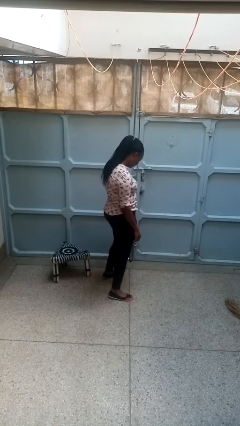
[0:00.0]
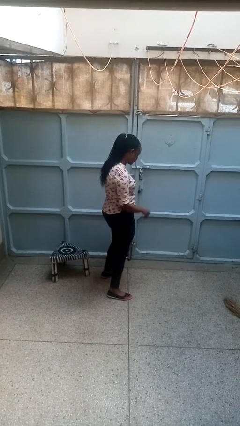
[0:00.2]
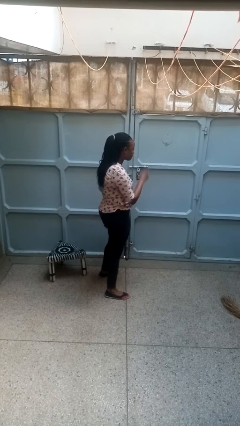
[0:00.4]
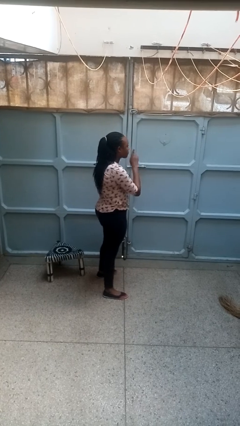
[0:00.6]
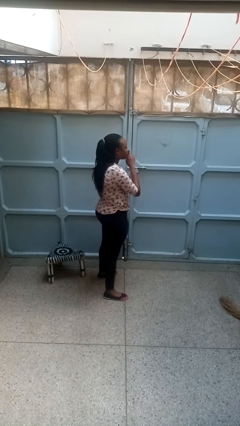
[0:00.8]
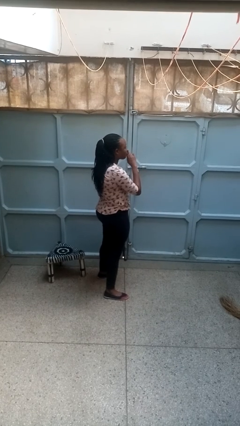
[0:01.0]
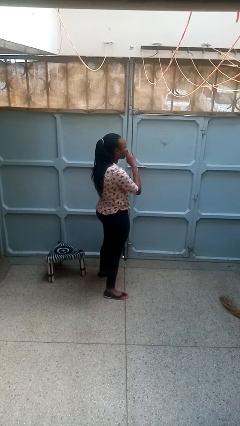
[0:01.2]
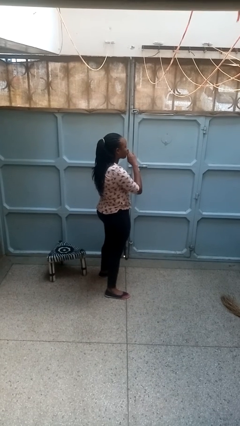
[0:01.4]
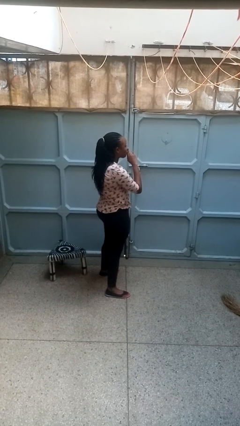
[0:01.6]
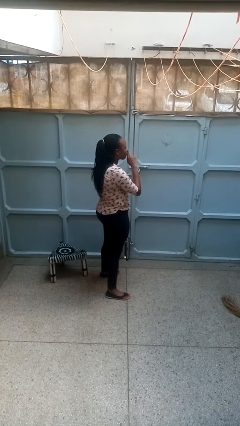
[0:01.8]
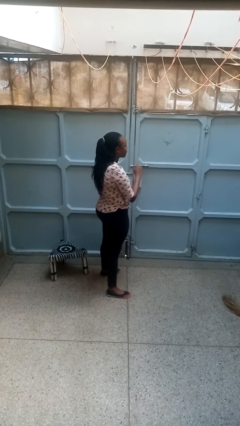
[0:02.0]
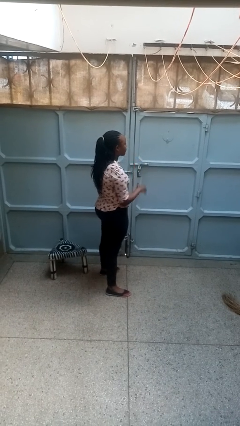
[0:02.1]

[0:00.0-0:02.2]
person gestures be quiet

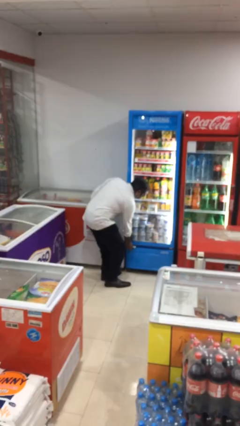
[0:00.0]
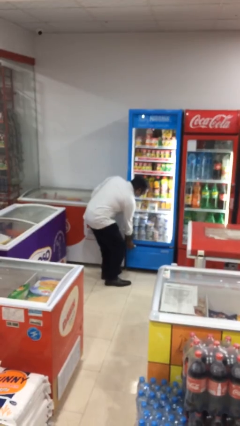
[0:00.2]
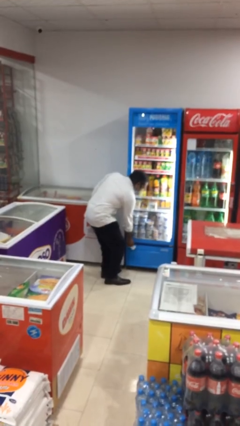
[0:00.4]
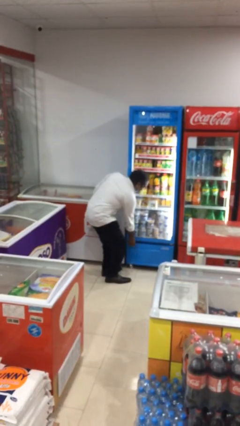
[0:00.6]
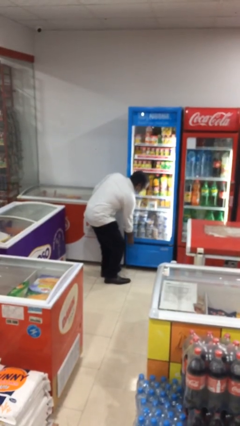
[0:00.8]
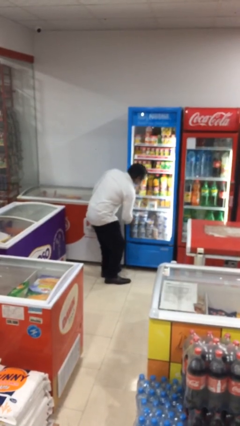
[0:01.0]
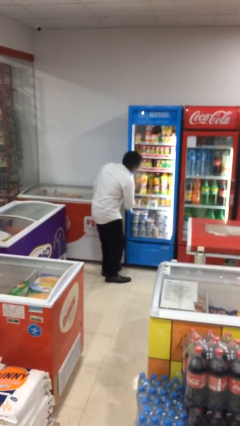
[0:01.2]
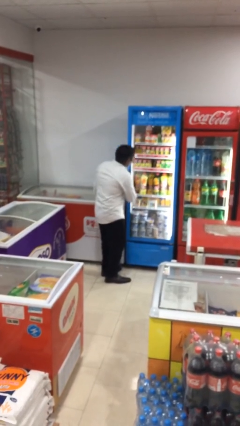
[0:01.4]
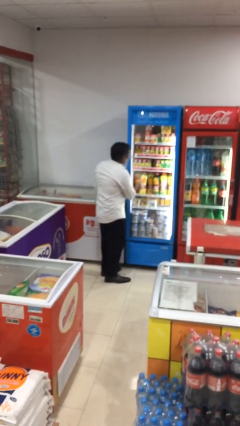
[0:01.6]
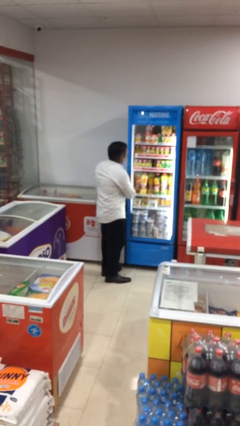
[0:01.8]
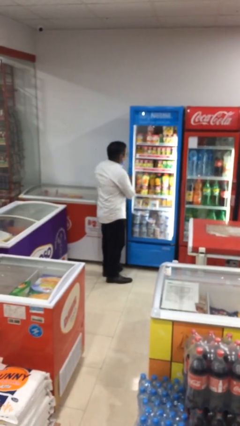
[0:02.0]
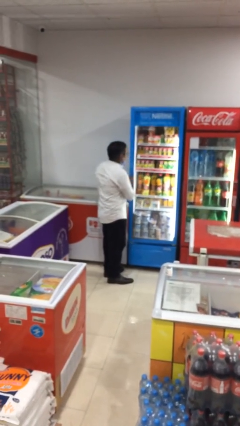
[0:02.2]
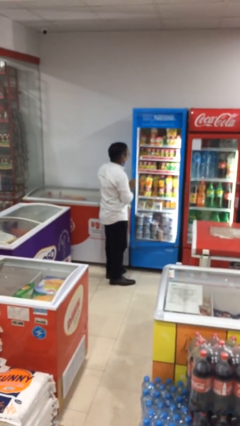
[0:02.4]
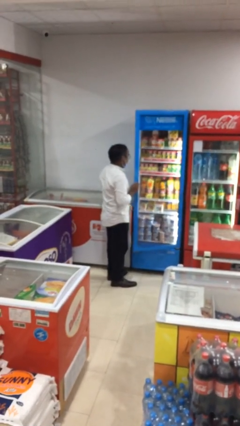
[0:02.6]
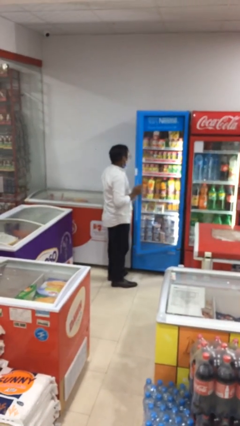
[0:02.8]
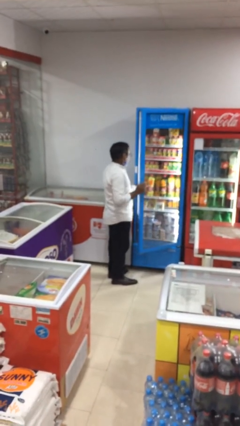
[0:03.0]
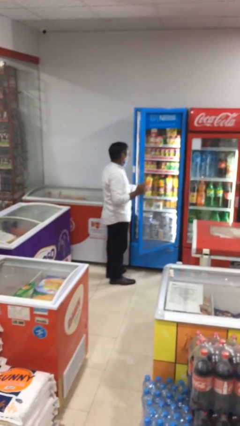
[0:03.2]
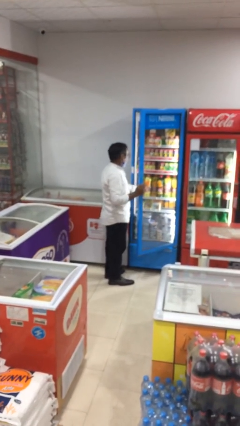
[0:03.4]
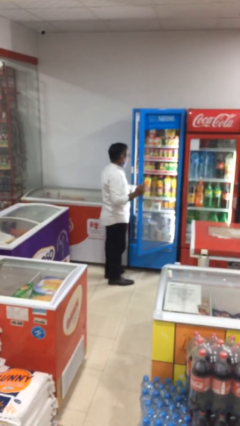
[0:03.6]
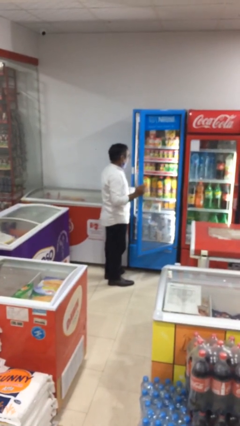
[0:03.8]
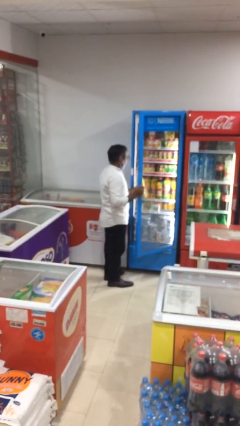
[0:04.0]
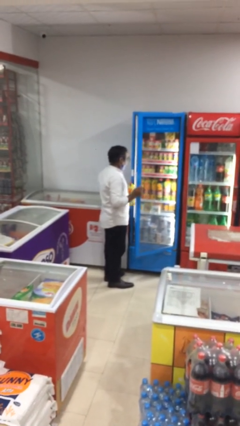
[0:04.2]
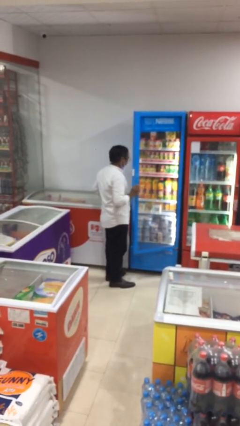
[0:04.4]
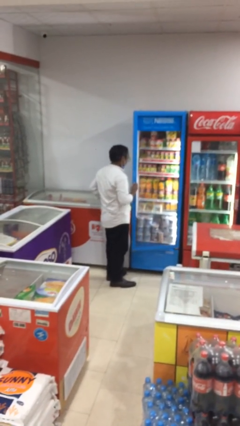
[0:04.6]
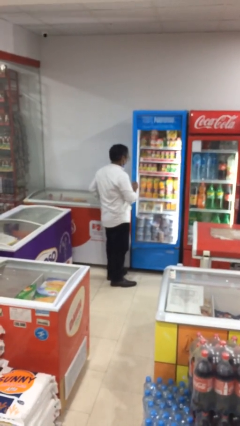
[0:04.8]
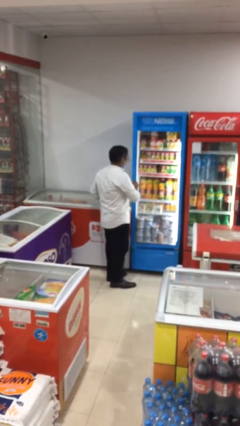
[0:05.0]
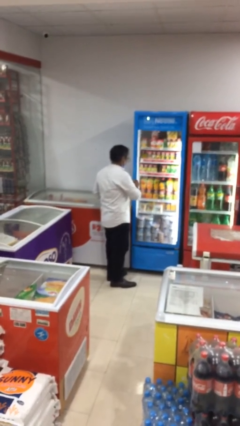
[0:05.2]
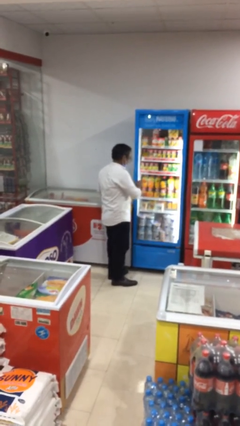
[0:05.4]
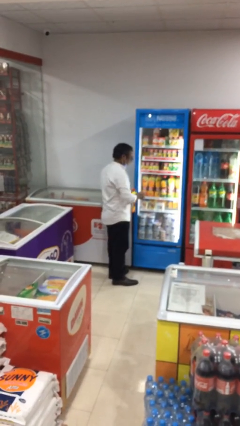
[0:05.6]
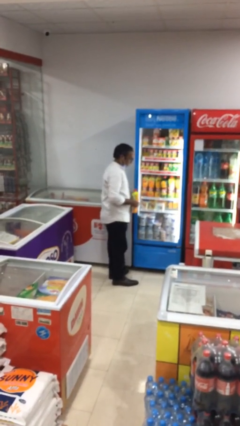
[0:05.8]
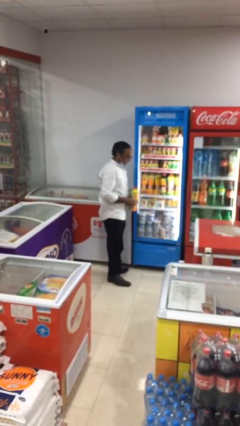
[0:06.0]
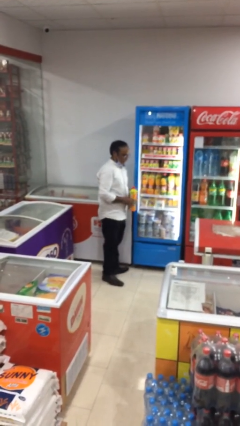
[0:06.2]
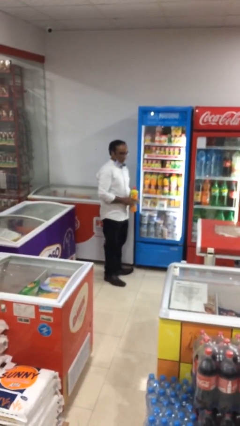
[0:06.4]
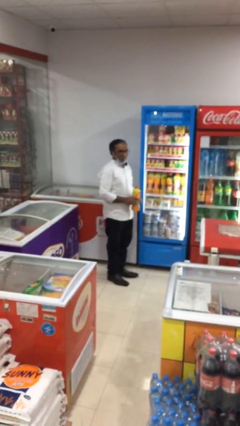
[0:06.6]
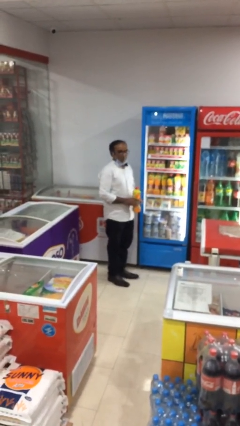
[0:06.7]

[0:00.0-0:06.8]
person purchases from machine

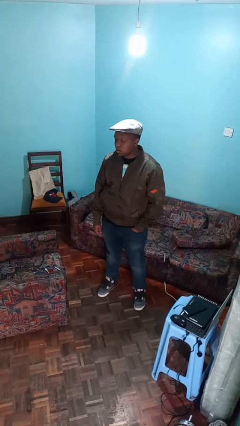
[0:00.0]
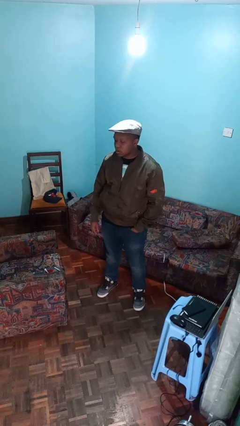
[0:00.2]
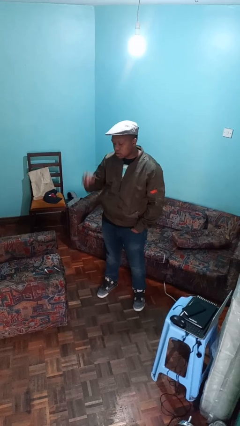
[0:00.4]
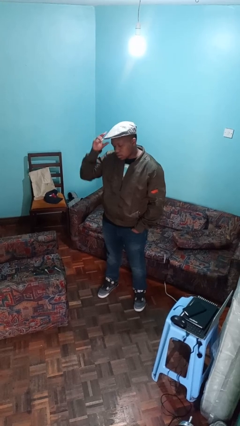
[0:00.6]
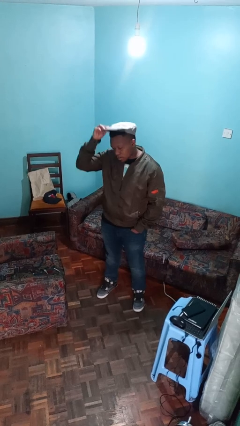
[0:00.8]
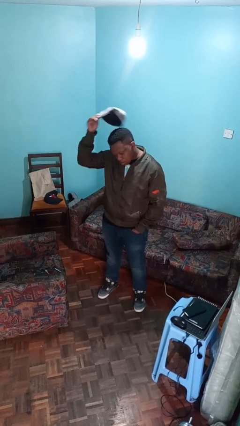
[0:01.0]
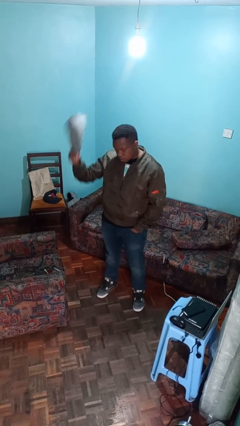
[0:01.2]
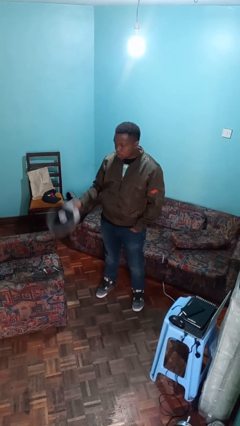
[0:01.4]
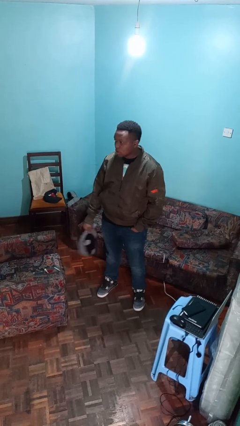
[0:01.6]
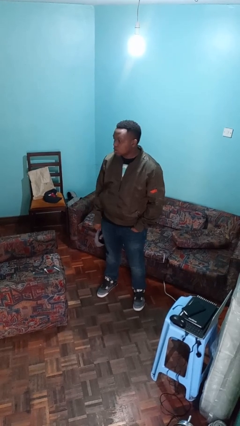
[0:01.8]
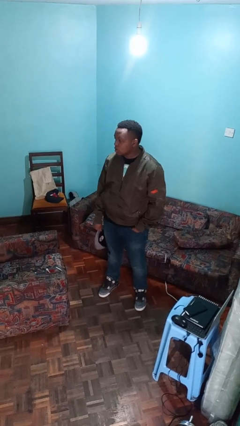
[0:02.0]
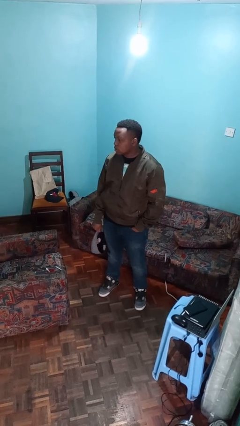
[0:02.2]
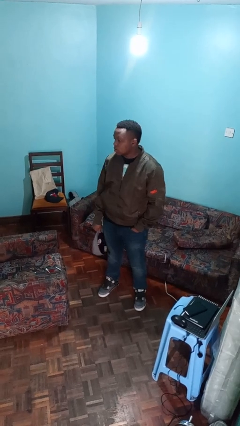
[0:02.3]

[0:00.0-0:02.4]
person takes off hat

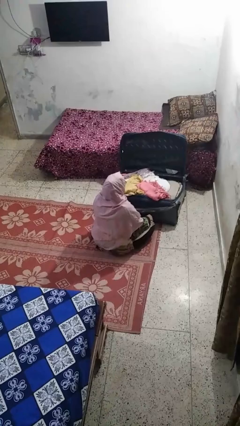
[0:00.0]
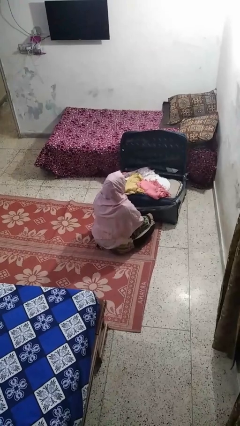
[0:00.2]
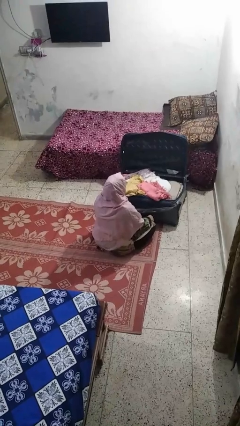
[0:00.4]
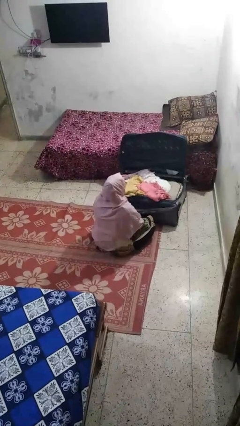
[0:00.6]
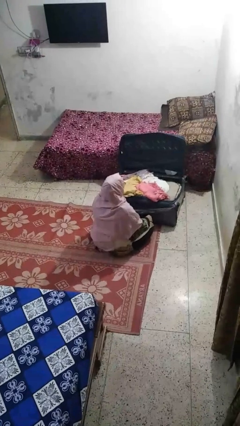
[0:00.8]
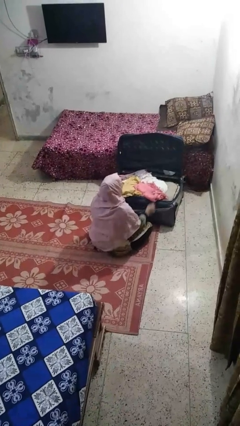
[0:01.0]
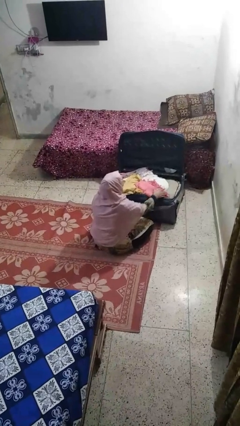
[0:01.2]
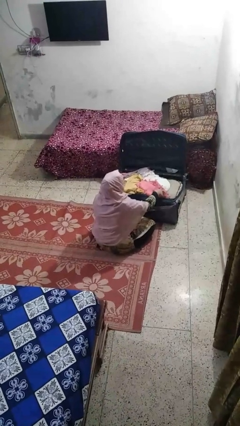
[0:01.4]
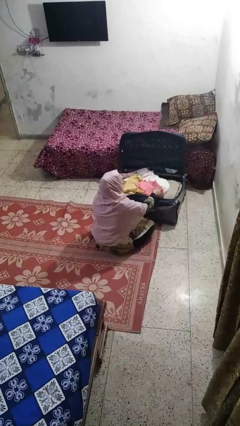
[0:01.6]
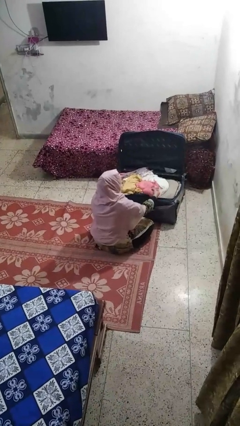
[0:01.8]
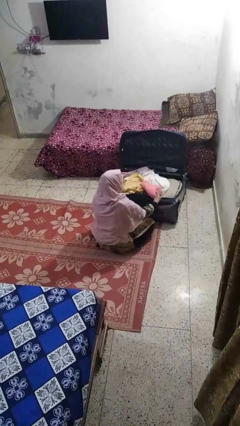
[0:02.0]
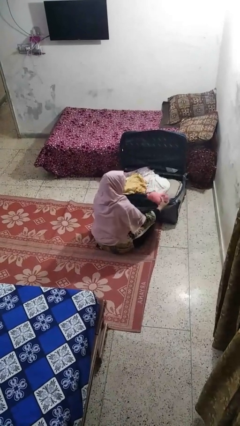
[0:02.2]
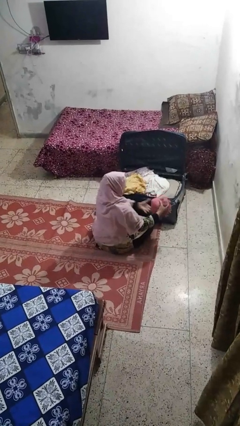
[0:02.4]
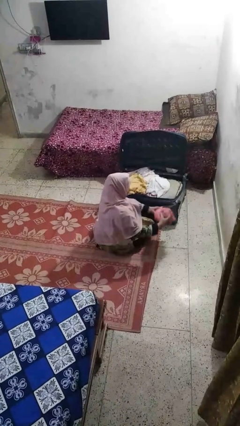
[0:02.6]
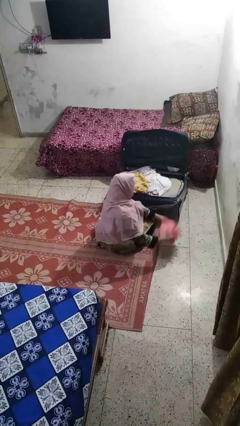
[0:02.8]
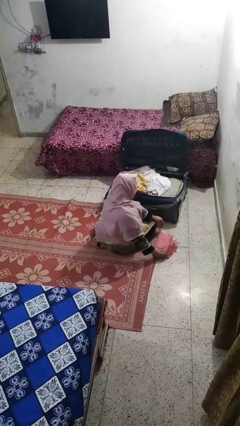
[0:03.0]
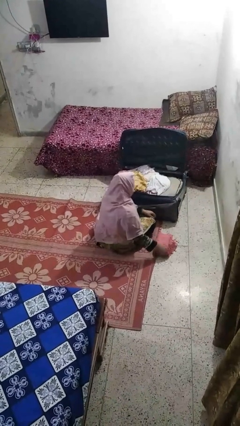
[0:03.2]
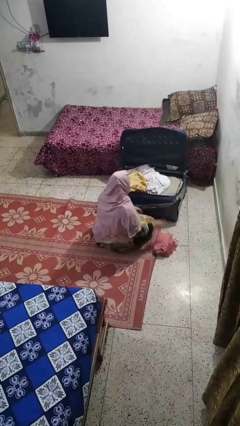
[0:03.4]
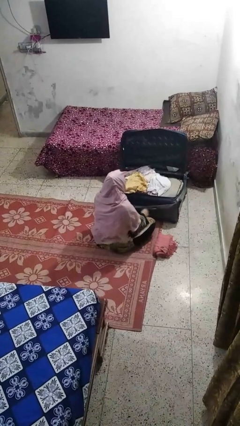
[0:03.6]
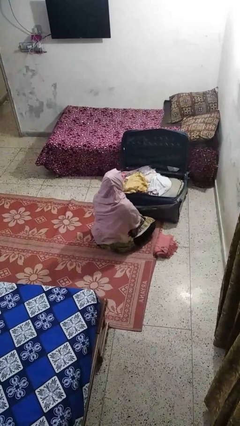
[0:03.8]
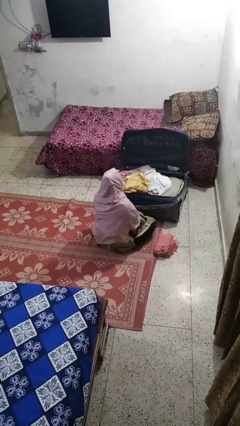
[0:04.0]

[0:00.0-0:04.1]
person unloads clothes from suitcase

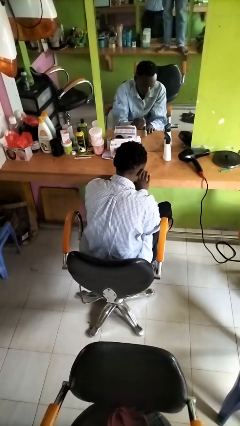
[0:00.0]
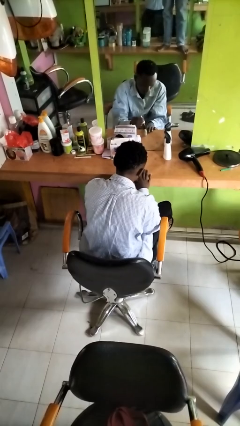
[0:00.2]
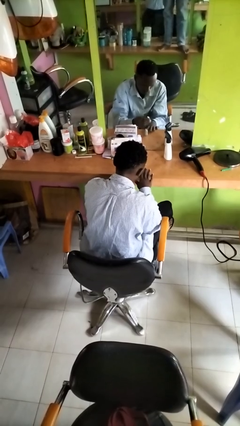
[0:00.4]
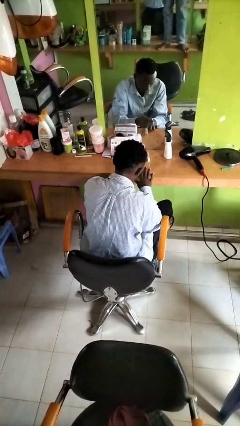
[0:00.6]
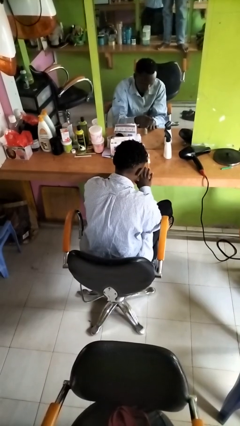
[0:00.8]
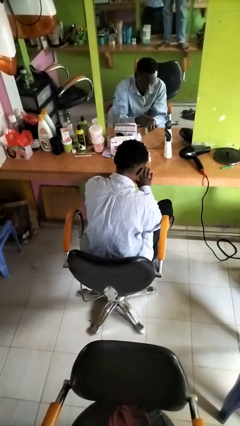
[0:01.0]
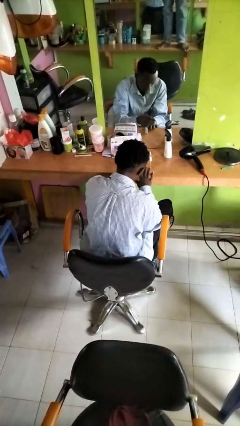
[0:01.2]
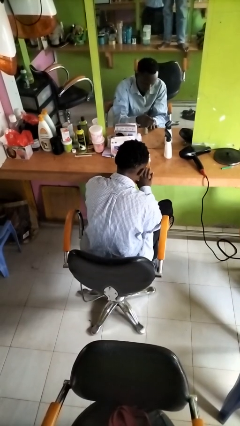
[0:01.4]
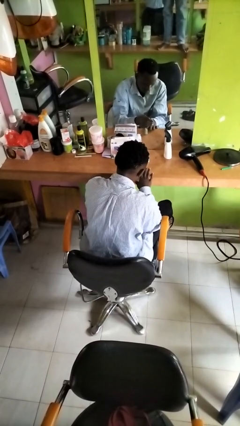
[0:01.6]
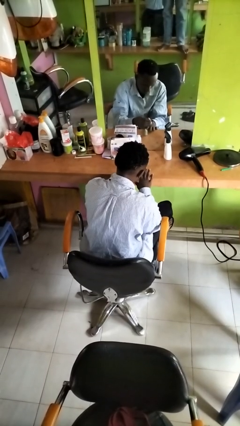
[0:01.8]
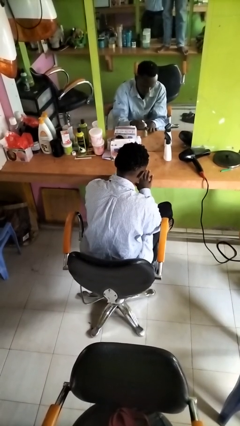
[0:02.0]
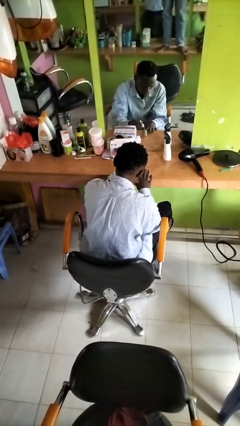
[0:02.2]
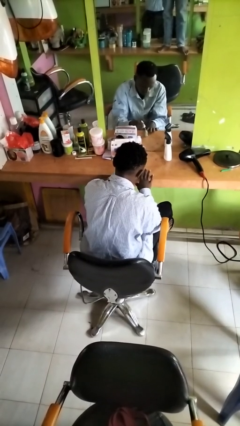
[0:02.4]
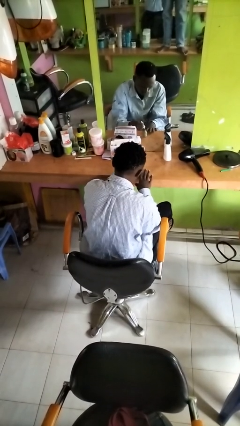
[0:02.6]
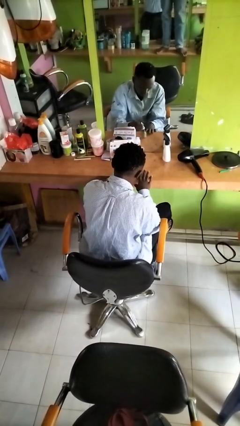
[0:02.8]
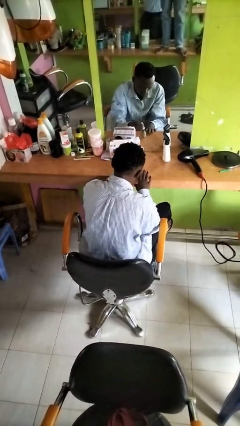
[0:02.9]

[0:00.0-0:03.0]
person paints fingernails
